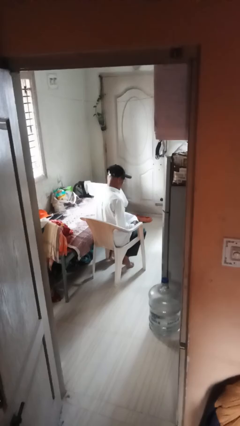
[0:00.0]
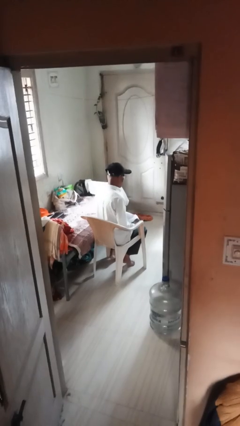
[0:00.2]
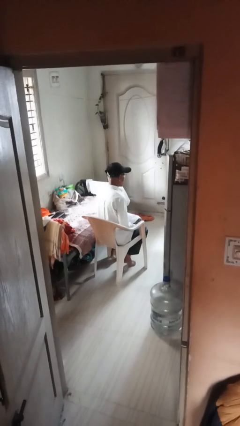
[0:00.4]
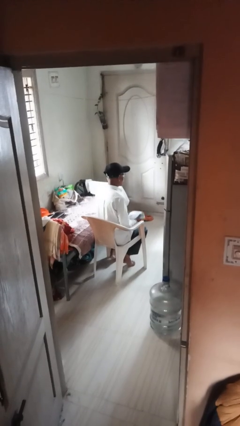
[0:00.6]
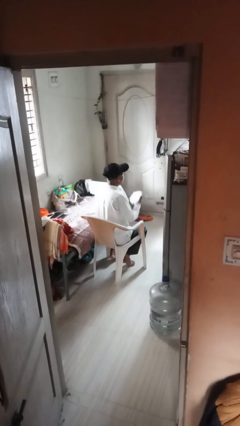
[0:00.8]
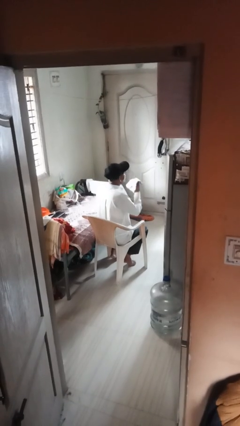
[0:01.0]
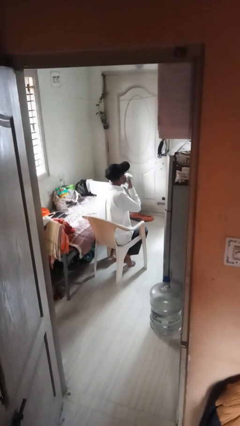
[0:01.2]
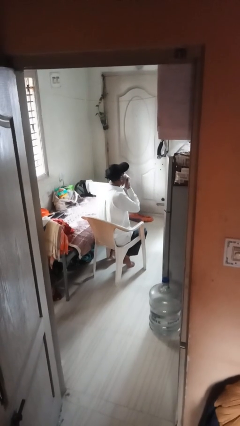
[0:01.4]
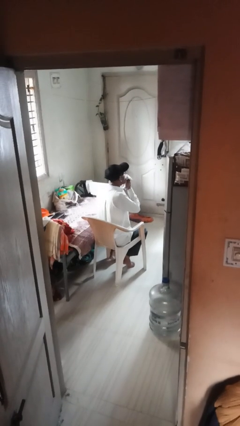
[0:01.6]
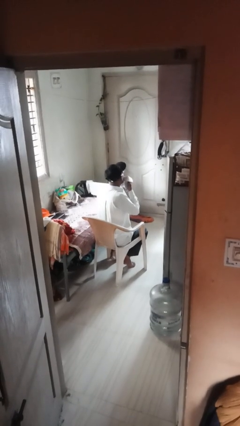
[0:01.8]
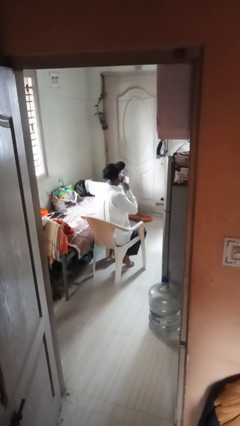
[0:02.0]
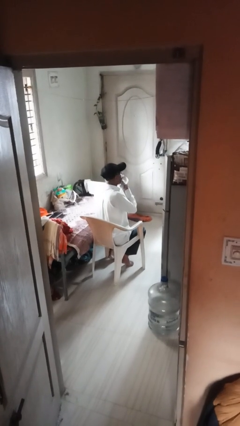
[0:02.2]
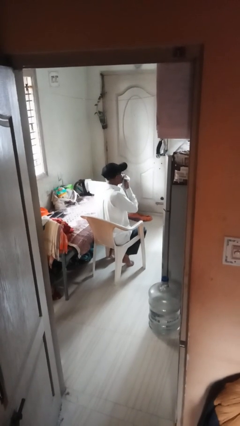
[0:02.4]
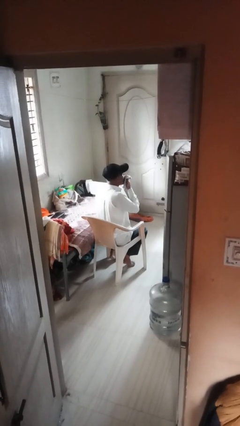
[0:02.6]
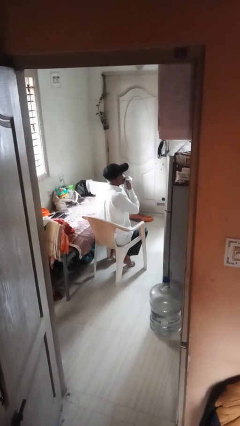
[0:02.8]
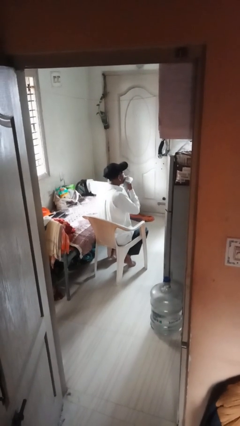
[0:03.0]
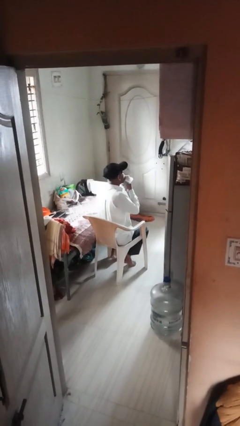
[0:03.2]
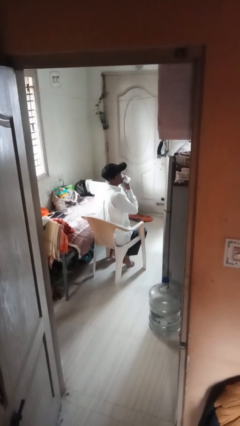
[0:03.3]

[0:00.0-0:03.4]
person wipes mouth with napkin

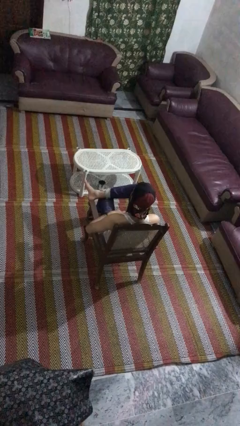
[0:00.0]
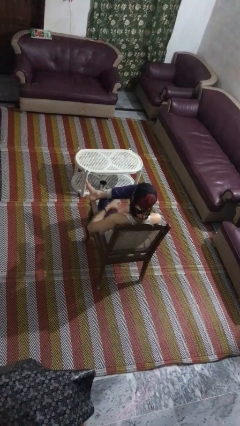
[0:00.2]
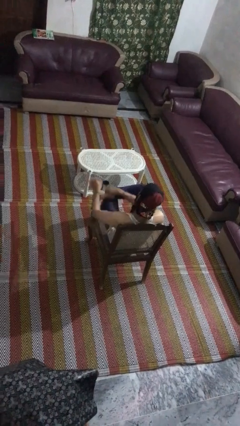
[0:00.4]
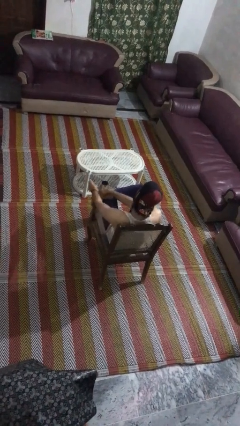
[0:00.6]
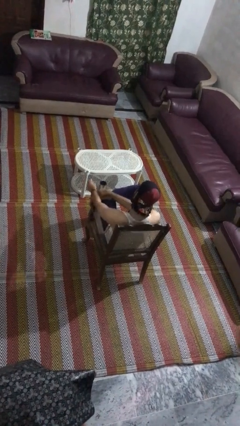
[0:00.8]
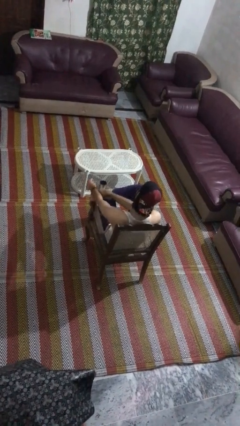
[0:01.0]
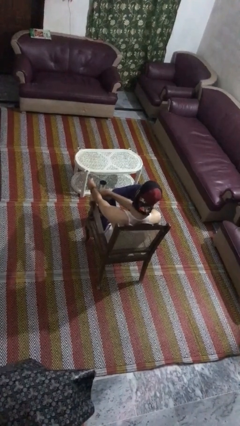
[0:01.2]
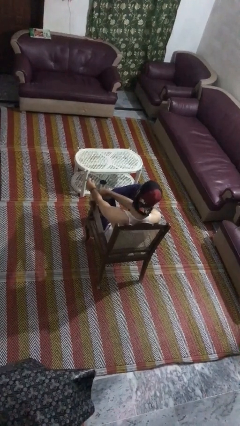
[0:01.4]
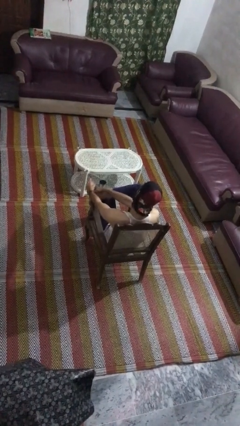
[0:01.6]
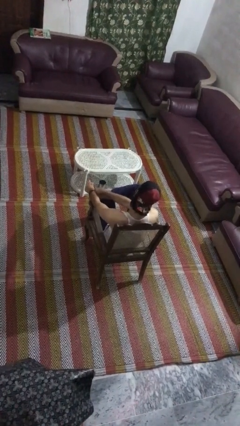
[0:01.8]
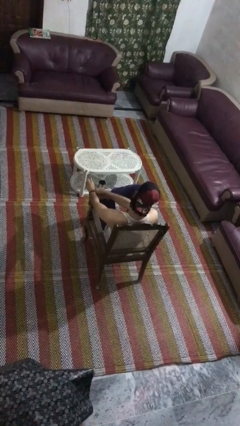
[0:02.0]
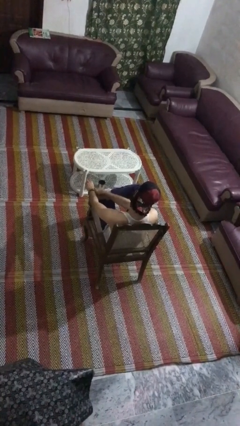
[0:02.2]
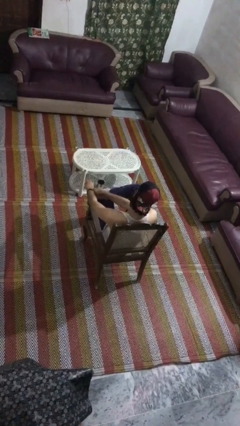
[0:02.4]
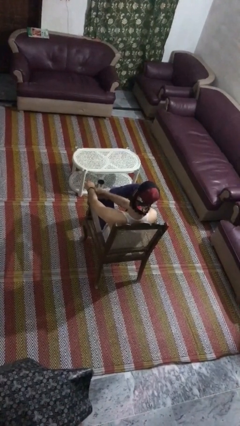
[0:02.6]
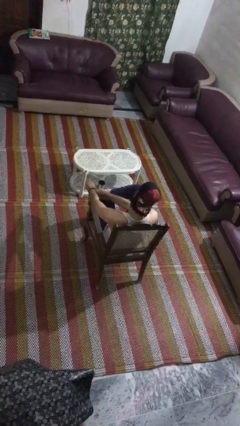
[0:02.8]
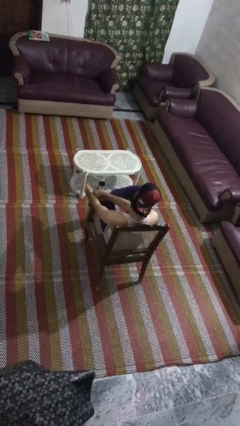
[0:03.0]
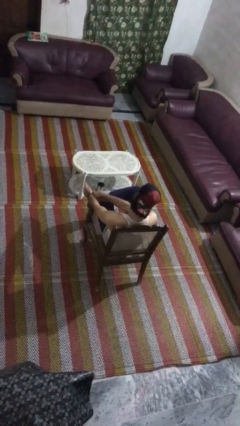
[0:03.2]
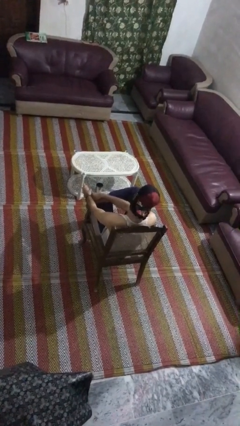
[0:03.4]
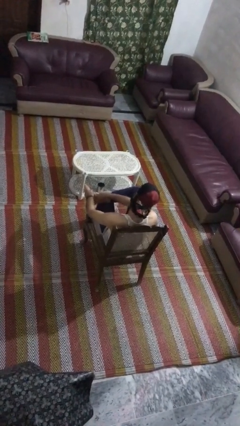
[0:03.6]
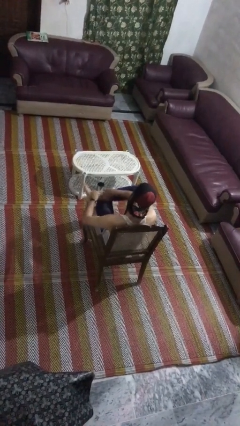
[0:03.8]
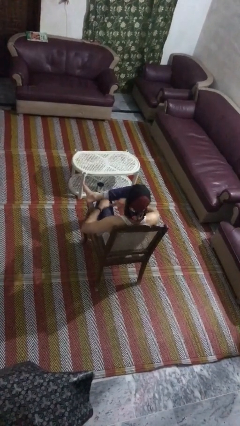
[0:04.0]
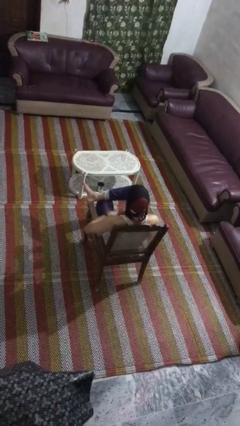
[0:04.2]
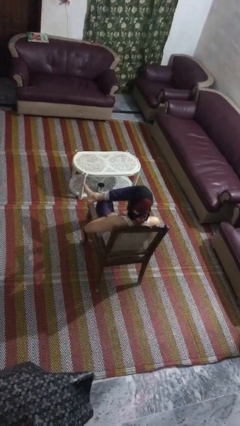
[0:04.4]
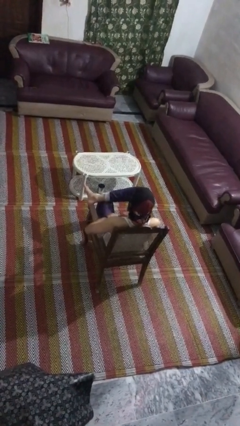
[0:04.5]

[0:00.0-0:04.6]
person rubs foot

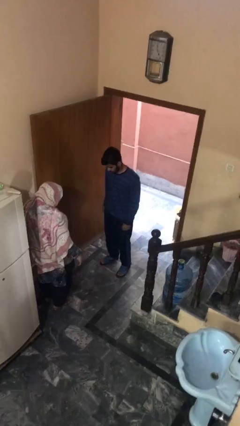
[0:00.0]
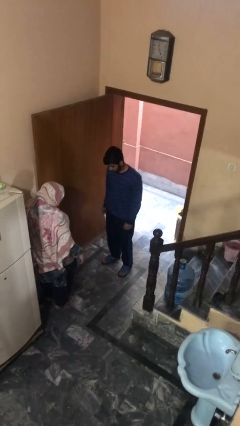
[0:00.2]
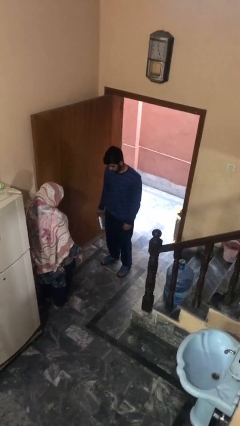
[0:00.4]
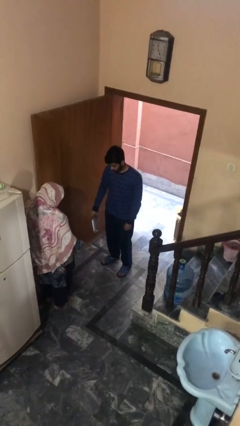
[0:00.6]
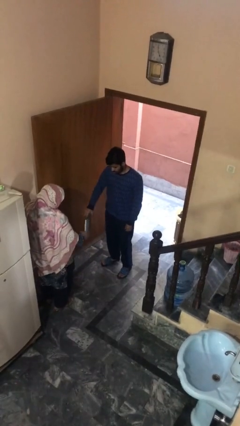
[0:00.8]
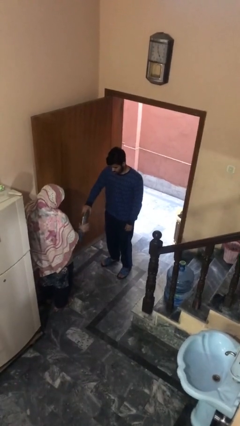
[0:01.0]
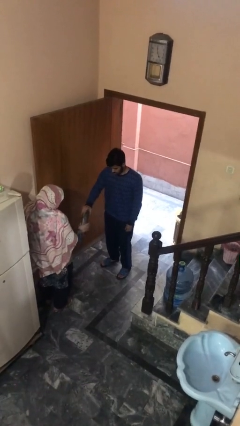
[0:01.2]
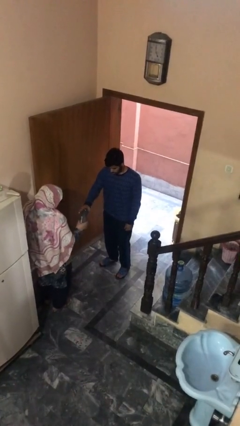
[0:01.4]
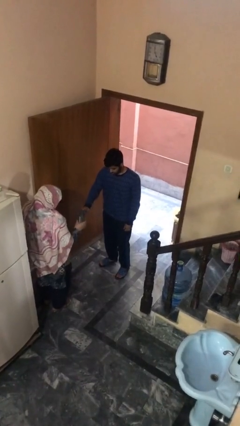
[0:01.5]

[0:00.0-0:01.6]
person transfers object to person

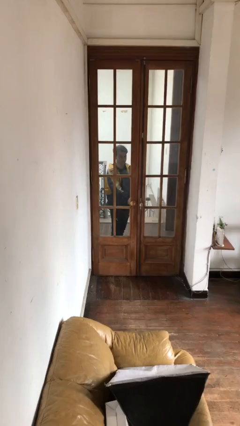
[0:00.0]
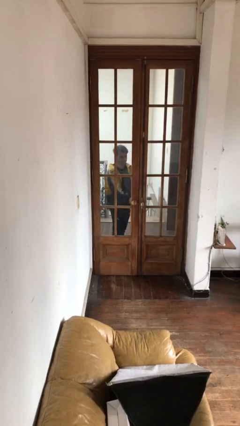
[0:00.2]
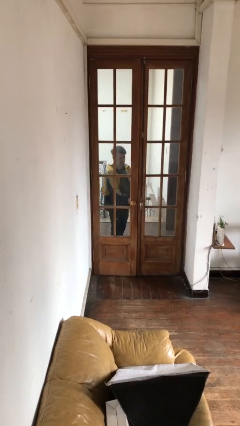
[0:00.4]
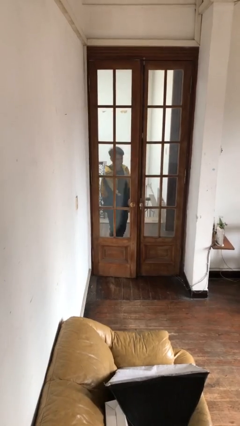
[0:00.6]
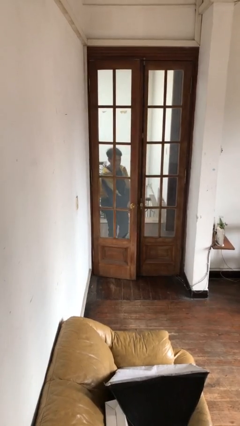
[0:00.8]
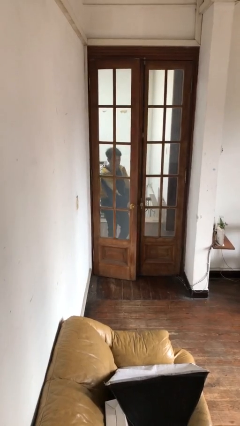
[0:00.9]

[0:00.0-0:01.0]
person opens facility door

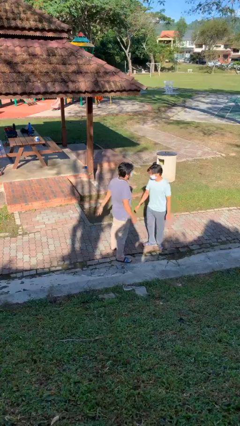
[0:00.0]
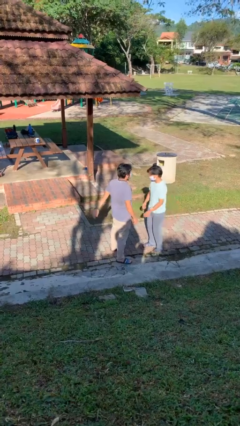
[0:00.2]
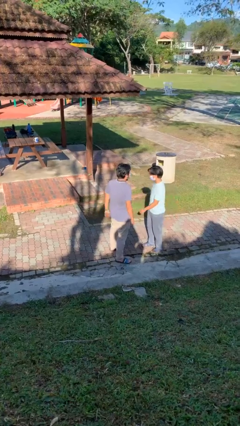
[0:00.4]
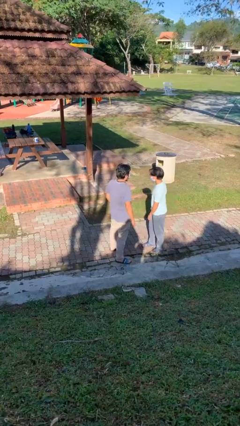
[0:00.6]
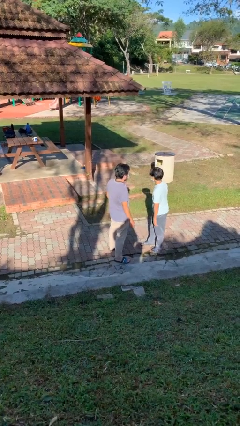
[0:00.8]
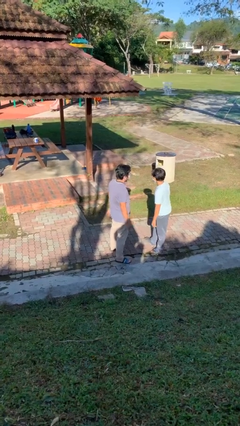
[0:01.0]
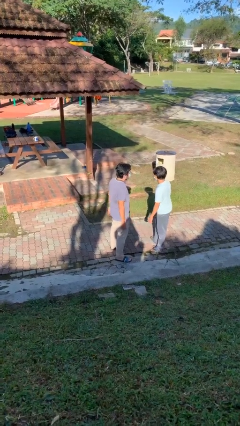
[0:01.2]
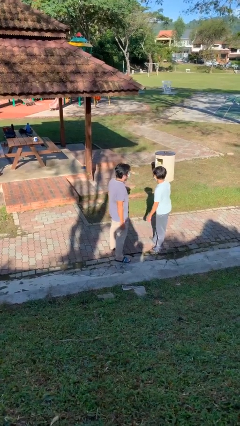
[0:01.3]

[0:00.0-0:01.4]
person spins person around

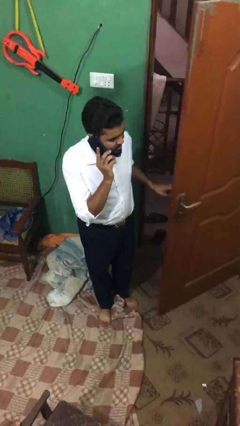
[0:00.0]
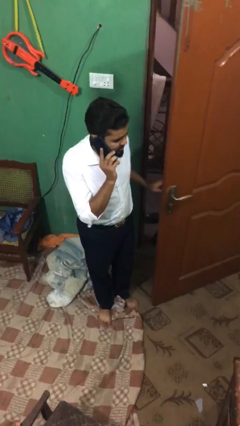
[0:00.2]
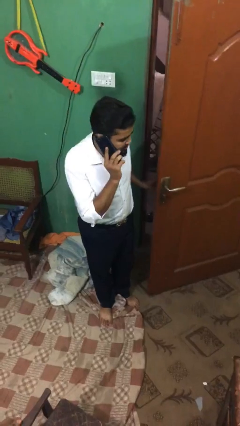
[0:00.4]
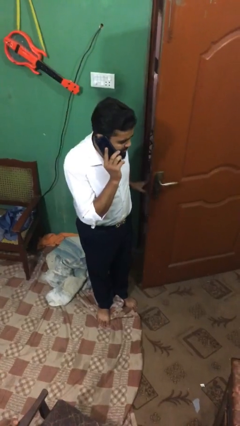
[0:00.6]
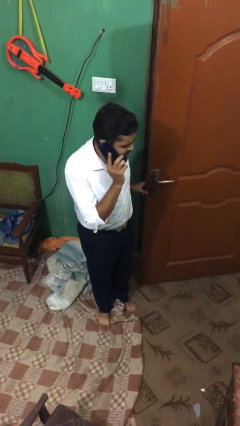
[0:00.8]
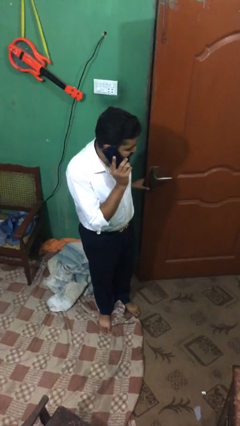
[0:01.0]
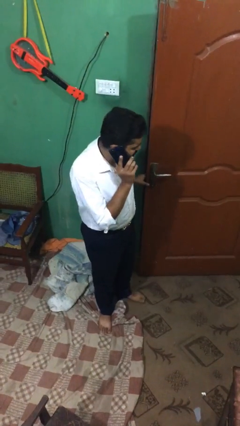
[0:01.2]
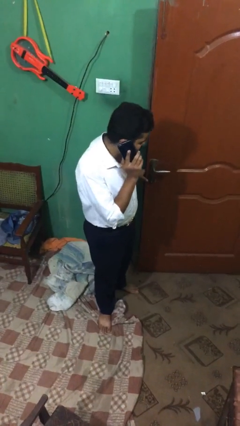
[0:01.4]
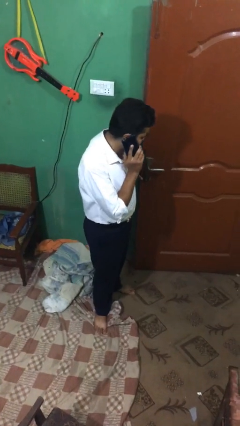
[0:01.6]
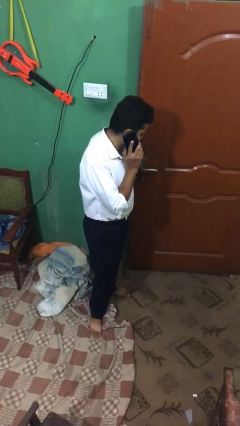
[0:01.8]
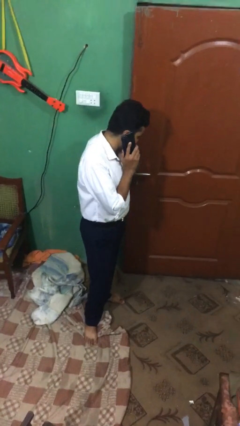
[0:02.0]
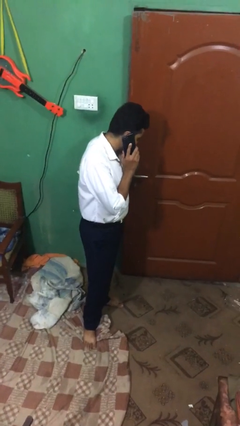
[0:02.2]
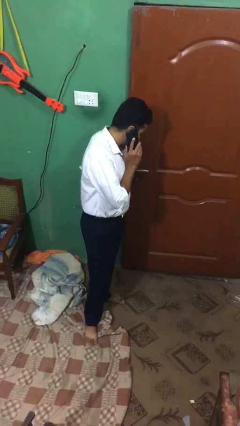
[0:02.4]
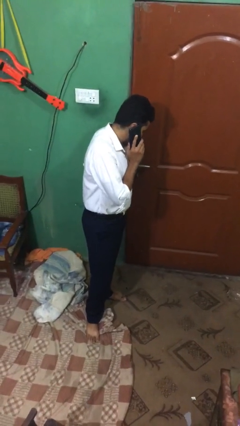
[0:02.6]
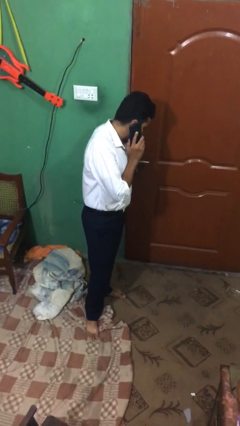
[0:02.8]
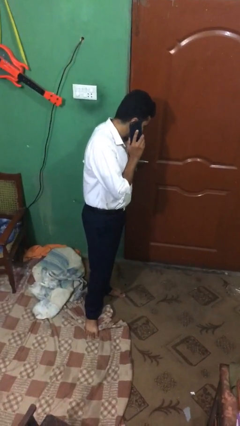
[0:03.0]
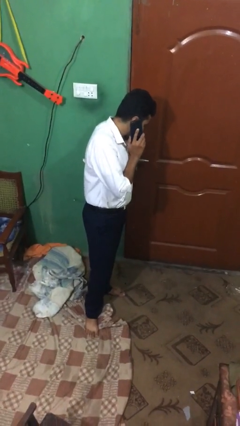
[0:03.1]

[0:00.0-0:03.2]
person closes facility door

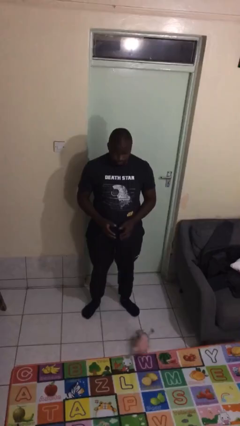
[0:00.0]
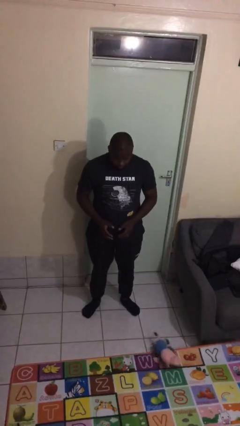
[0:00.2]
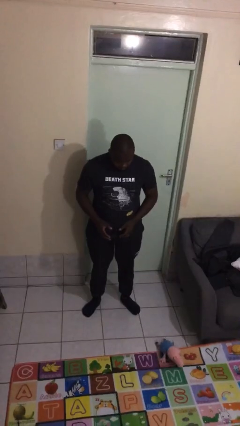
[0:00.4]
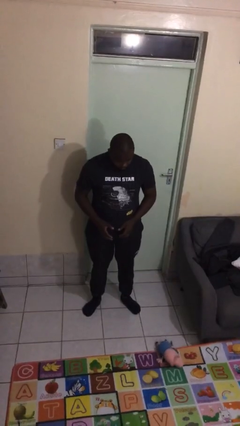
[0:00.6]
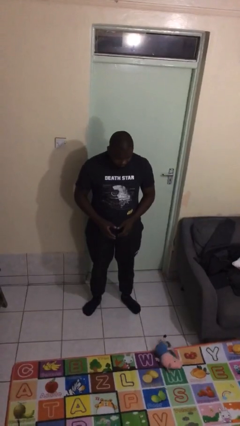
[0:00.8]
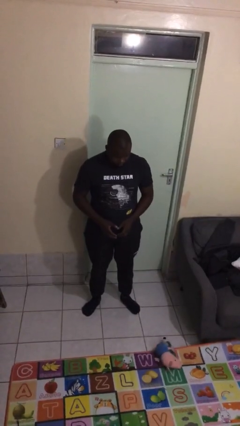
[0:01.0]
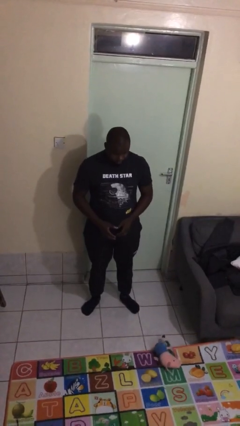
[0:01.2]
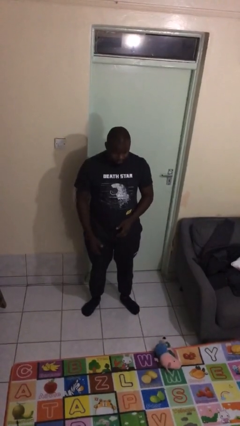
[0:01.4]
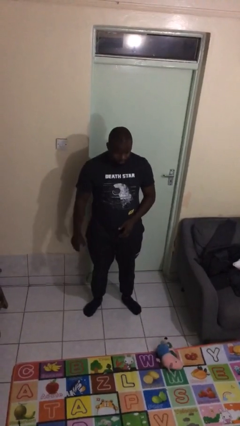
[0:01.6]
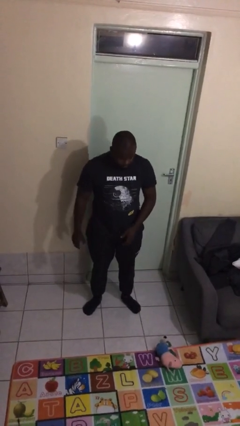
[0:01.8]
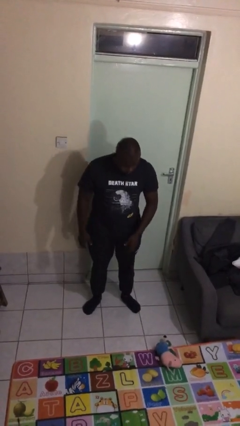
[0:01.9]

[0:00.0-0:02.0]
person drops object
